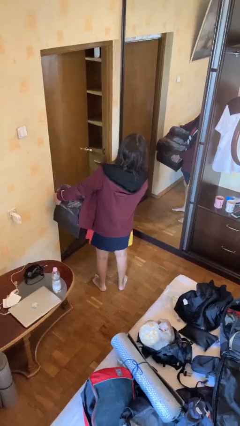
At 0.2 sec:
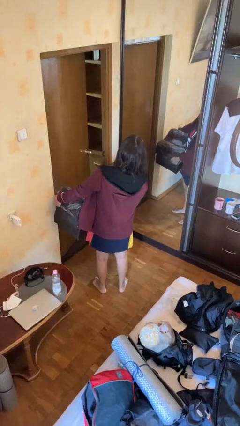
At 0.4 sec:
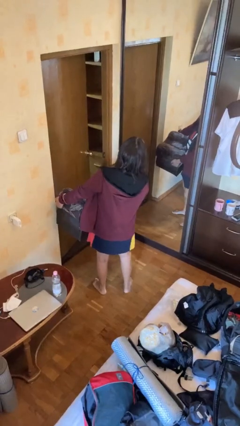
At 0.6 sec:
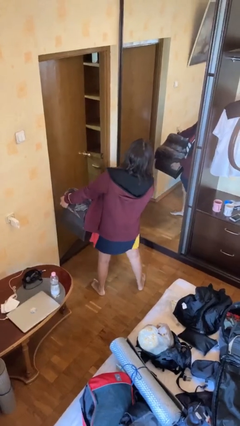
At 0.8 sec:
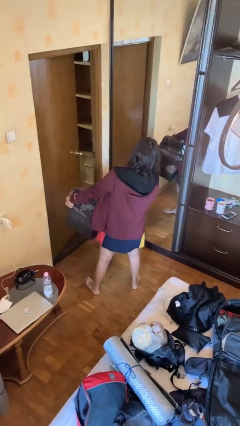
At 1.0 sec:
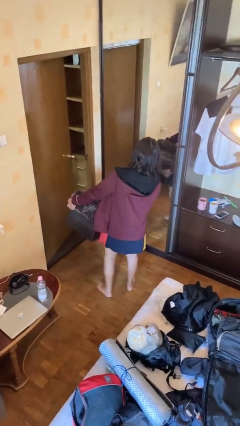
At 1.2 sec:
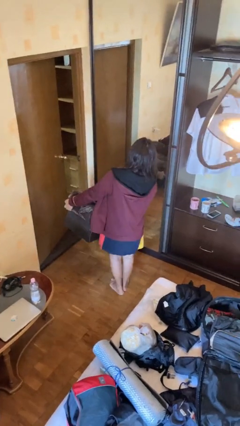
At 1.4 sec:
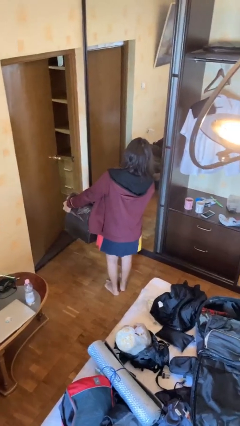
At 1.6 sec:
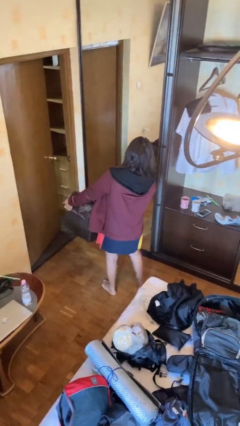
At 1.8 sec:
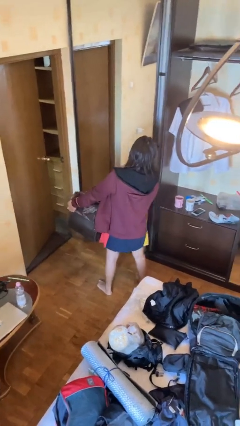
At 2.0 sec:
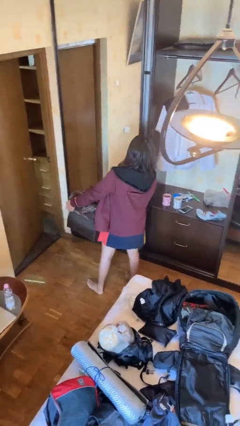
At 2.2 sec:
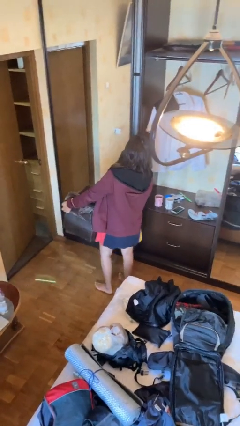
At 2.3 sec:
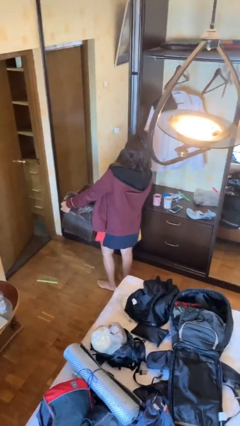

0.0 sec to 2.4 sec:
person carries furniture

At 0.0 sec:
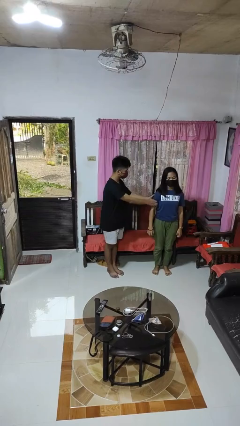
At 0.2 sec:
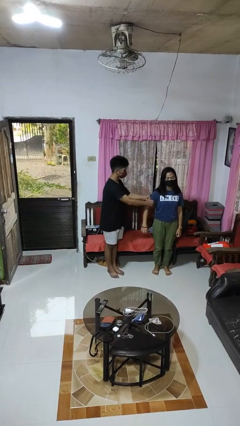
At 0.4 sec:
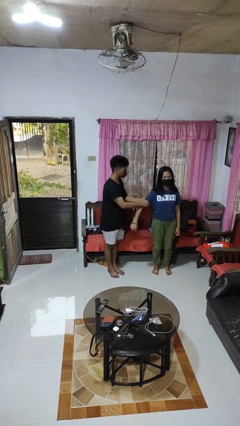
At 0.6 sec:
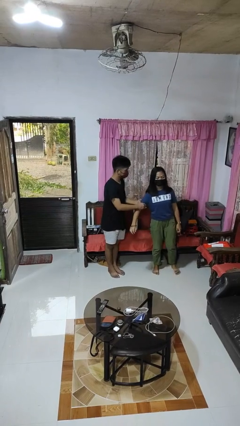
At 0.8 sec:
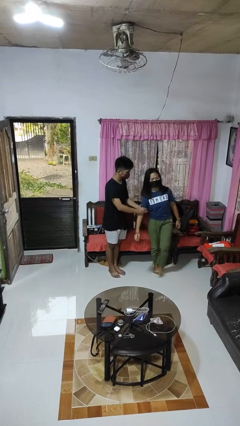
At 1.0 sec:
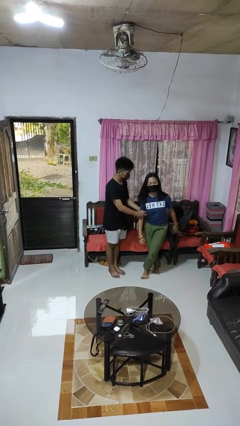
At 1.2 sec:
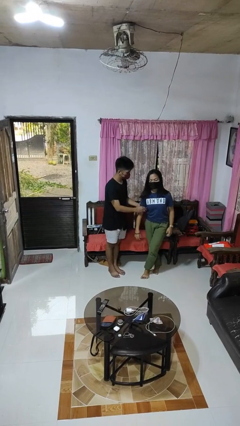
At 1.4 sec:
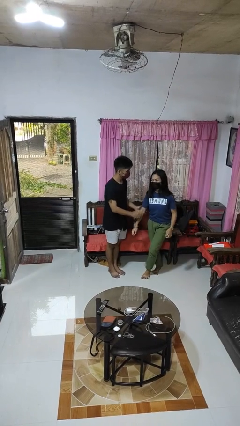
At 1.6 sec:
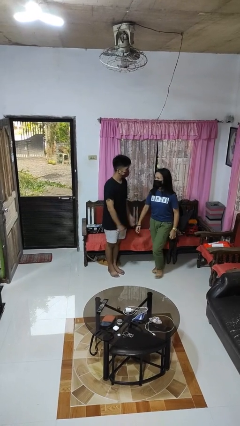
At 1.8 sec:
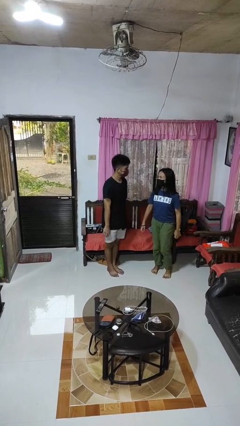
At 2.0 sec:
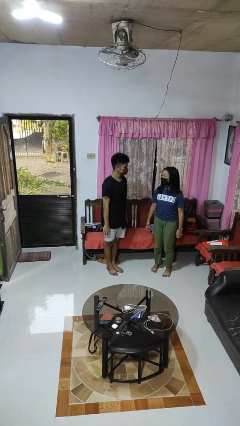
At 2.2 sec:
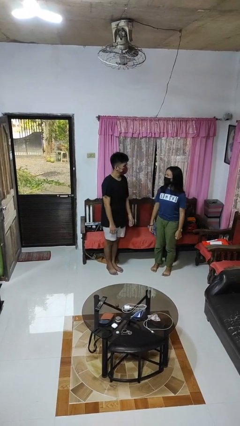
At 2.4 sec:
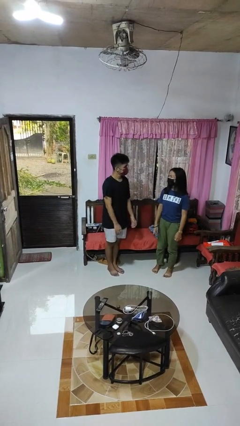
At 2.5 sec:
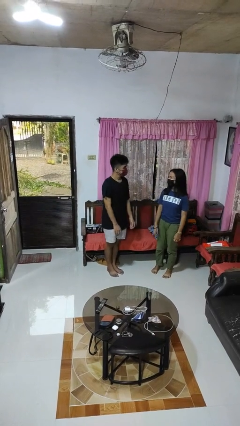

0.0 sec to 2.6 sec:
person grabs person by bicep

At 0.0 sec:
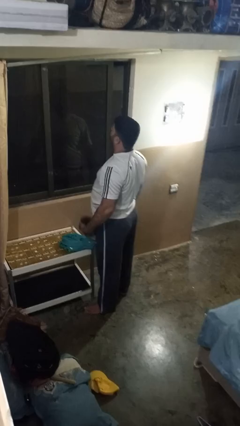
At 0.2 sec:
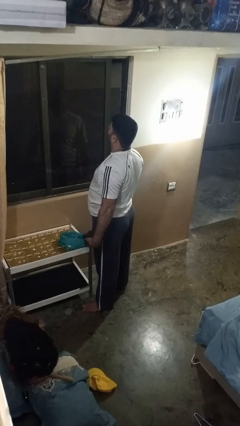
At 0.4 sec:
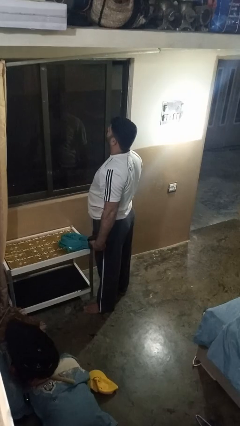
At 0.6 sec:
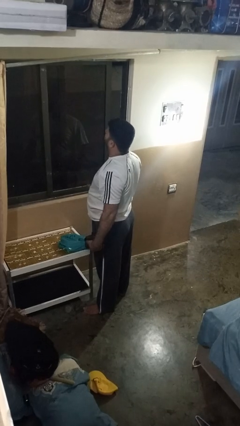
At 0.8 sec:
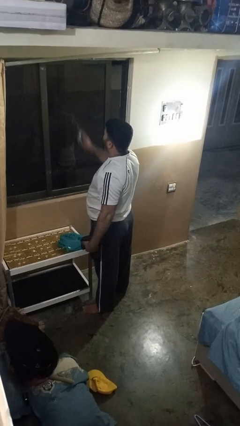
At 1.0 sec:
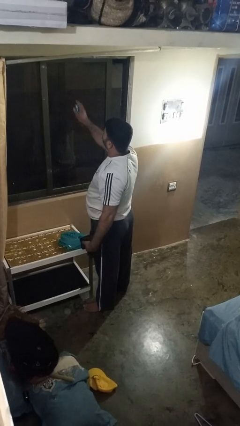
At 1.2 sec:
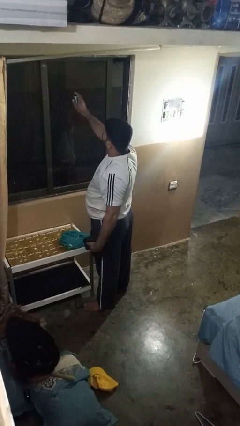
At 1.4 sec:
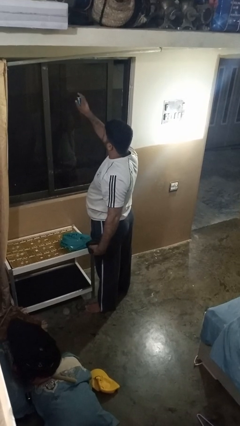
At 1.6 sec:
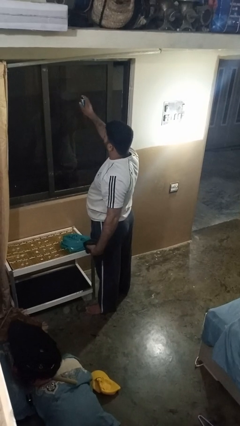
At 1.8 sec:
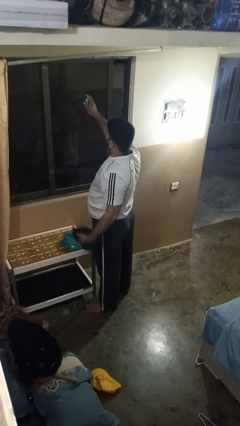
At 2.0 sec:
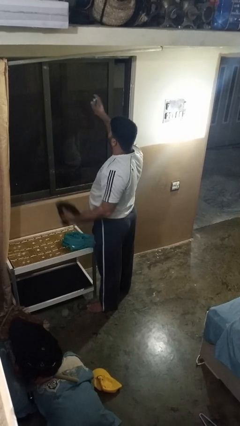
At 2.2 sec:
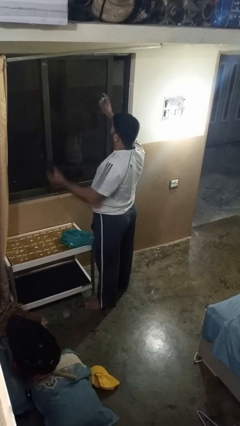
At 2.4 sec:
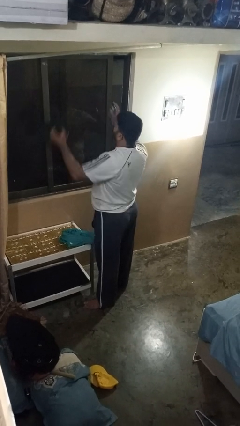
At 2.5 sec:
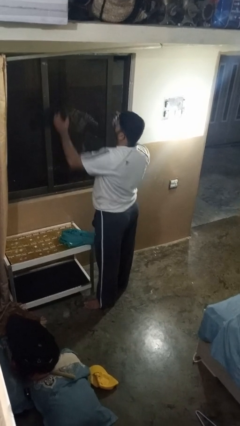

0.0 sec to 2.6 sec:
person sprays from bottle

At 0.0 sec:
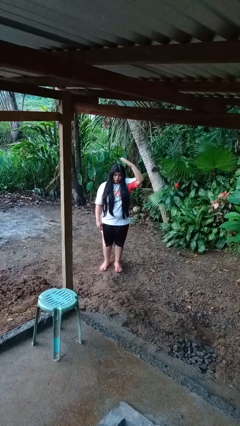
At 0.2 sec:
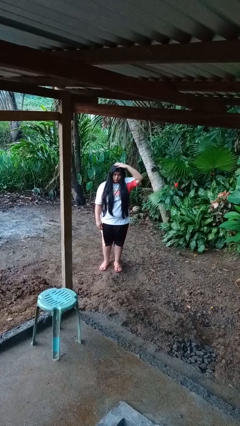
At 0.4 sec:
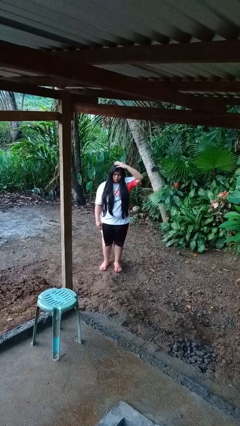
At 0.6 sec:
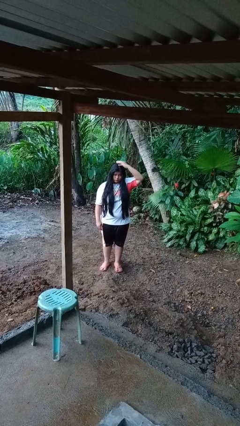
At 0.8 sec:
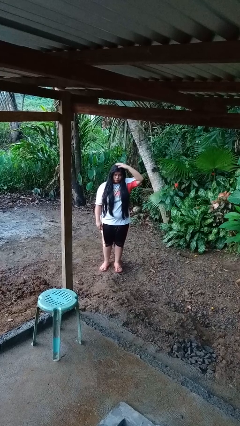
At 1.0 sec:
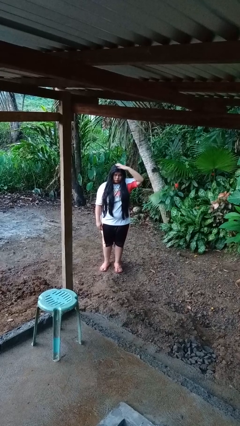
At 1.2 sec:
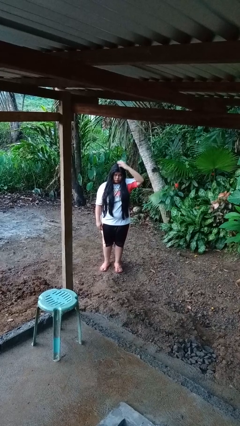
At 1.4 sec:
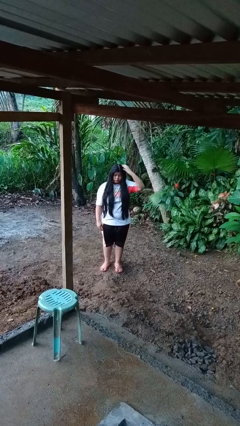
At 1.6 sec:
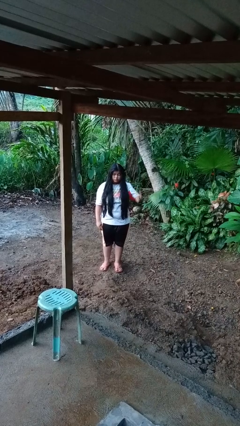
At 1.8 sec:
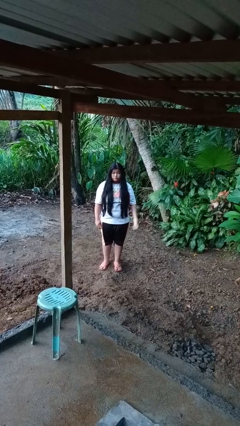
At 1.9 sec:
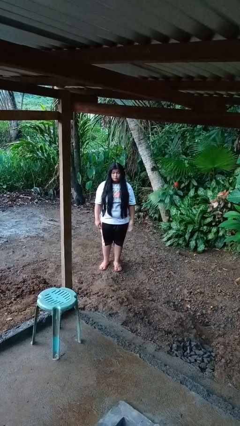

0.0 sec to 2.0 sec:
person pats head

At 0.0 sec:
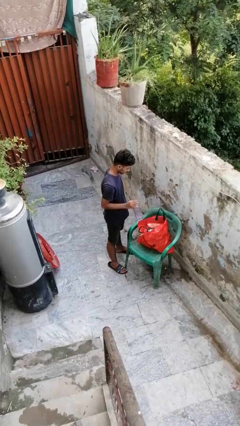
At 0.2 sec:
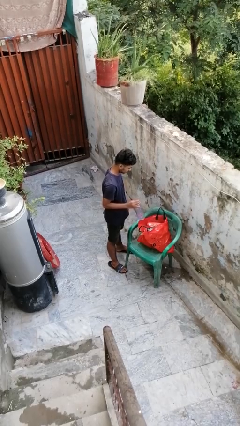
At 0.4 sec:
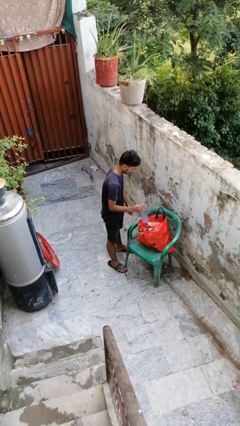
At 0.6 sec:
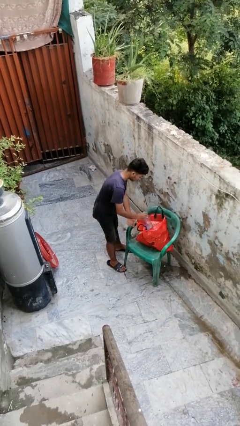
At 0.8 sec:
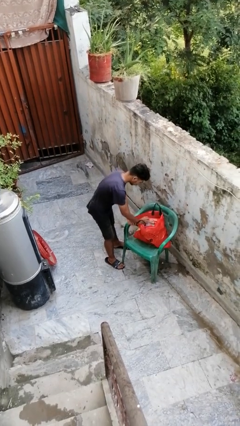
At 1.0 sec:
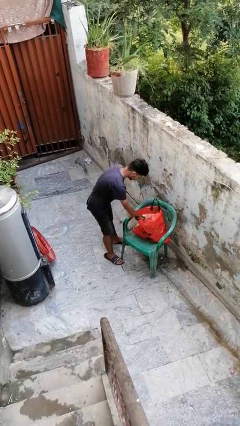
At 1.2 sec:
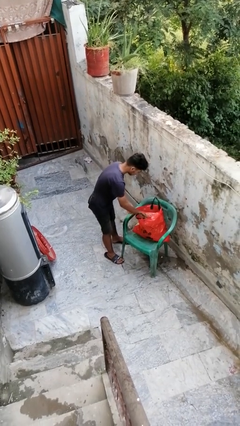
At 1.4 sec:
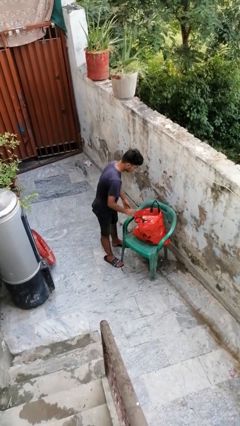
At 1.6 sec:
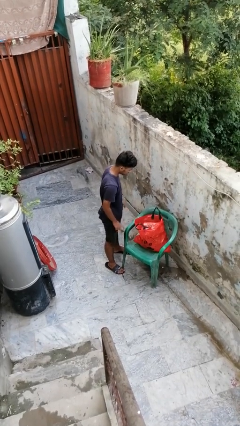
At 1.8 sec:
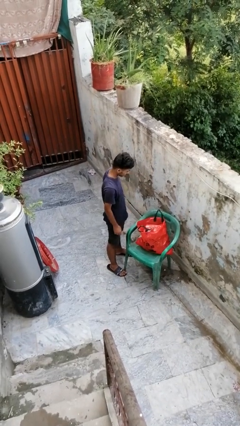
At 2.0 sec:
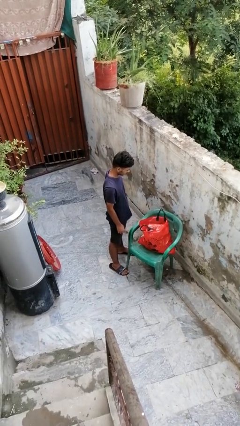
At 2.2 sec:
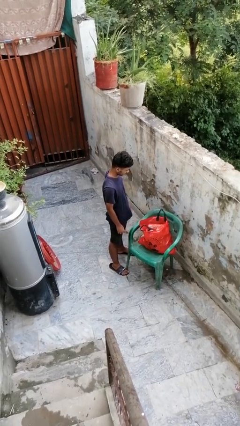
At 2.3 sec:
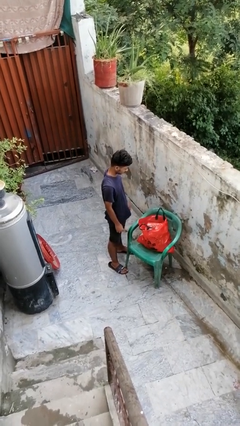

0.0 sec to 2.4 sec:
person puts object into bag

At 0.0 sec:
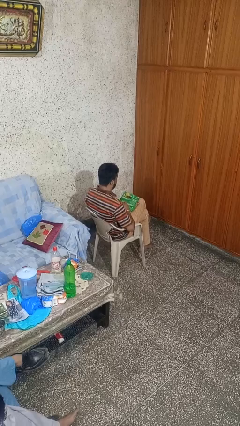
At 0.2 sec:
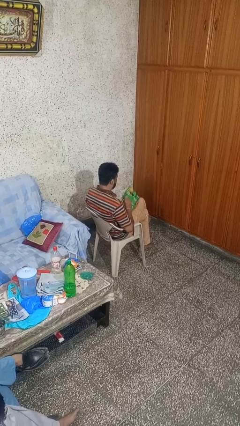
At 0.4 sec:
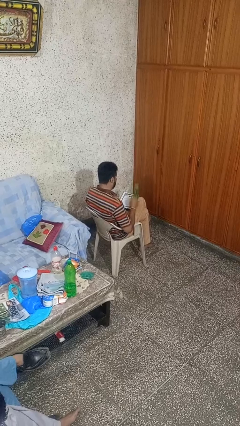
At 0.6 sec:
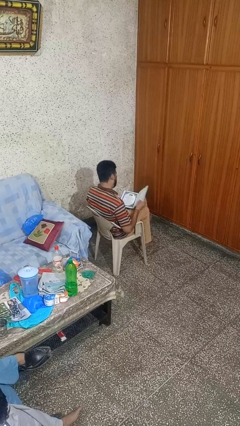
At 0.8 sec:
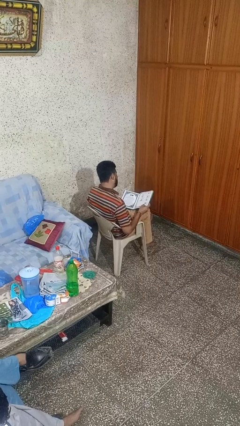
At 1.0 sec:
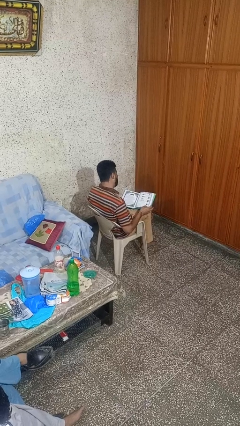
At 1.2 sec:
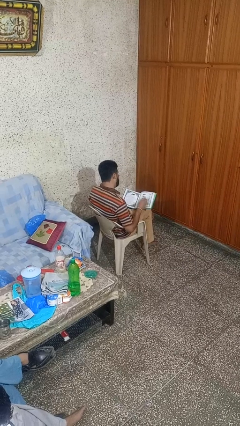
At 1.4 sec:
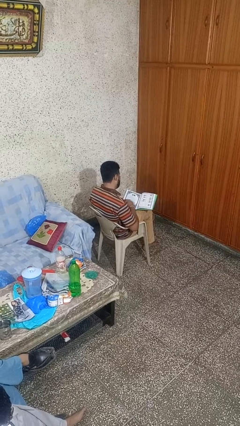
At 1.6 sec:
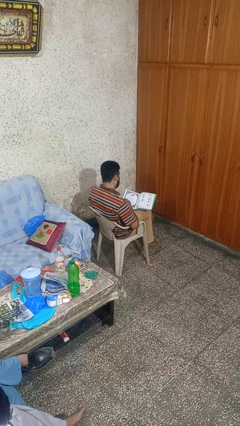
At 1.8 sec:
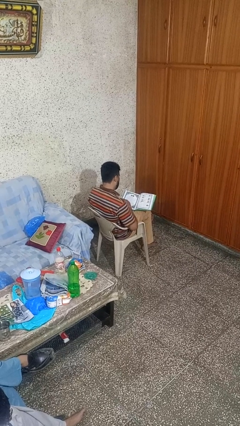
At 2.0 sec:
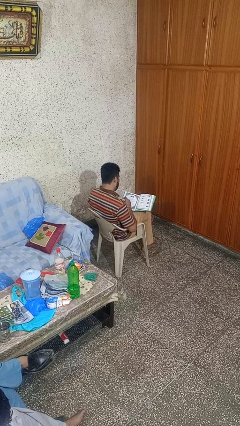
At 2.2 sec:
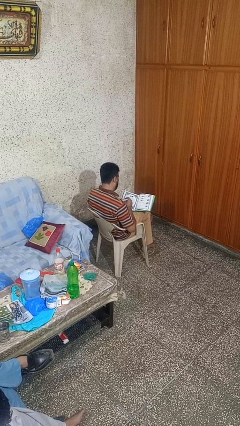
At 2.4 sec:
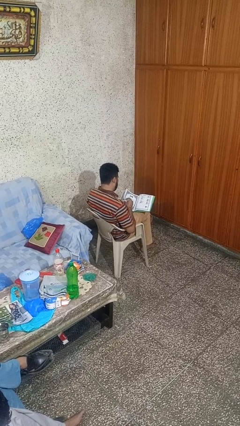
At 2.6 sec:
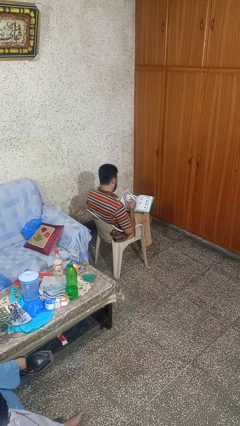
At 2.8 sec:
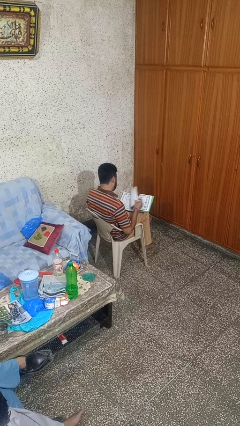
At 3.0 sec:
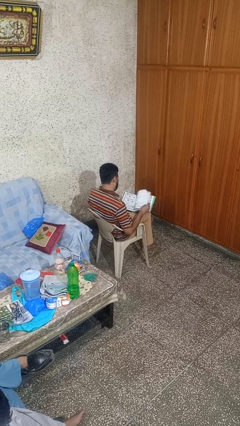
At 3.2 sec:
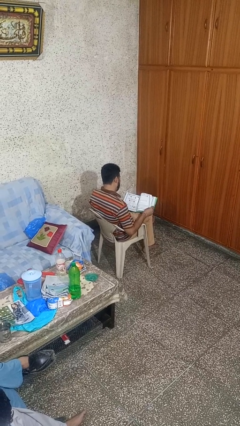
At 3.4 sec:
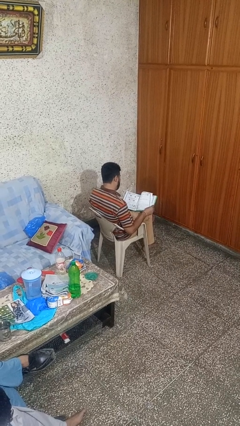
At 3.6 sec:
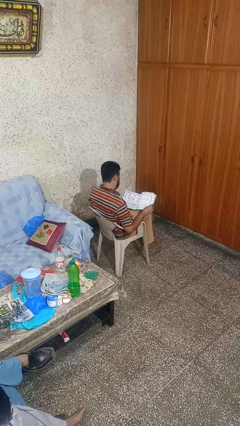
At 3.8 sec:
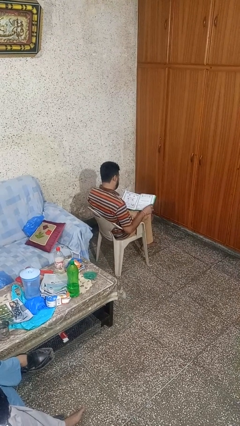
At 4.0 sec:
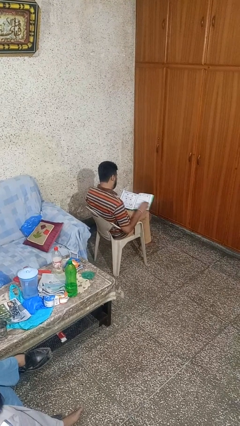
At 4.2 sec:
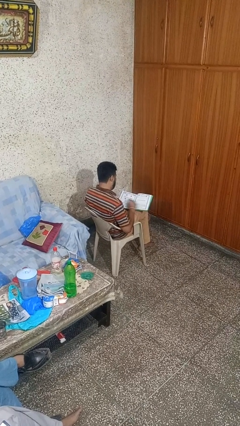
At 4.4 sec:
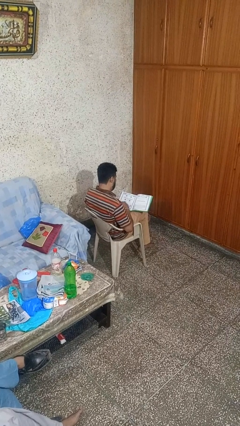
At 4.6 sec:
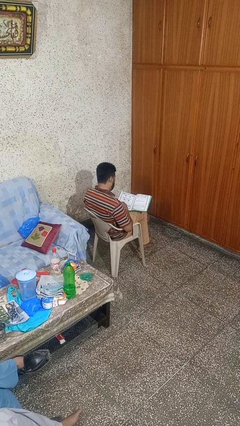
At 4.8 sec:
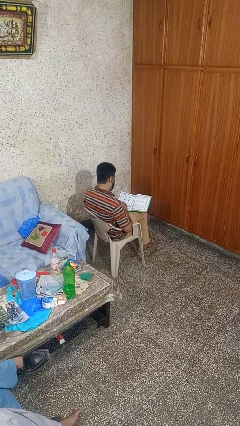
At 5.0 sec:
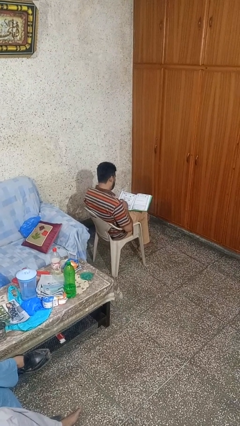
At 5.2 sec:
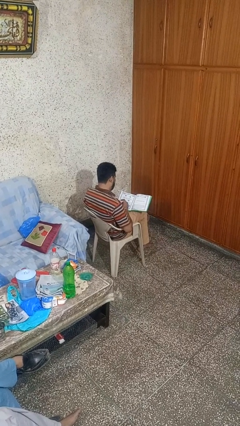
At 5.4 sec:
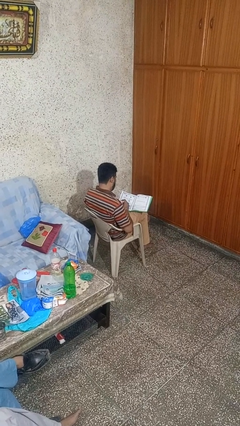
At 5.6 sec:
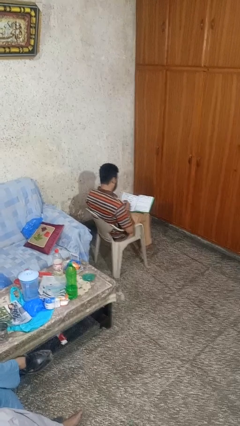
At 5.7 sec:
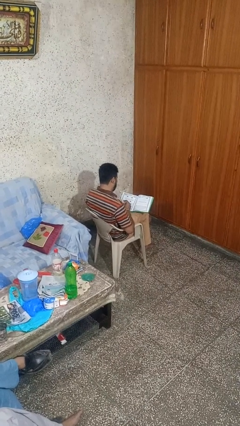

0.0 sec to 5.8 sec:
person reads book
